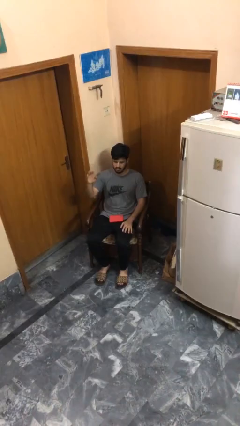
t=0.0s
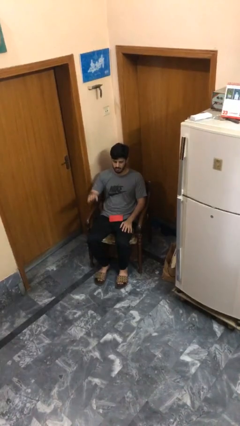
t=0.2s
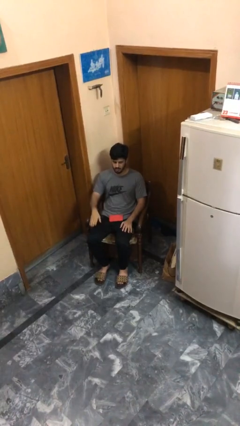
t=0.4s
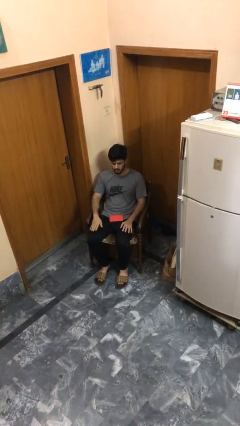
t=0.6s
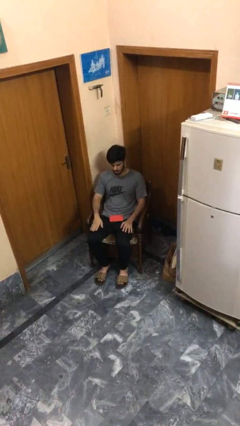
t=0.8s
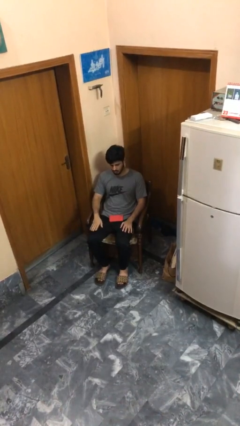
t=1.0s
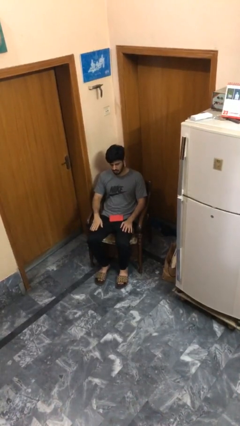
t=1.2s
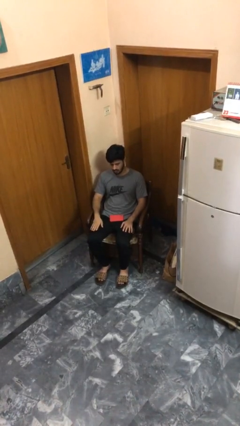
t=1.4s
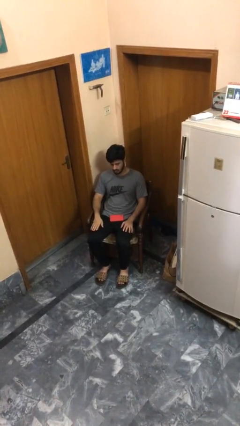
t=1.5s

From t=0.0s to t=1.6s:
person gestures lower hand

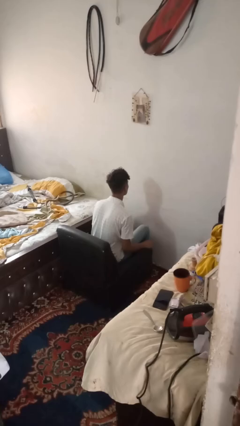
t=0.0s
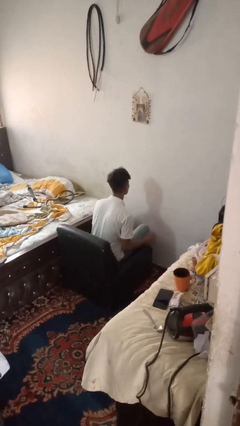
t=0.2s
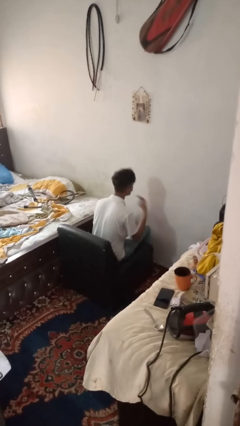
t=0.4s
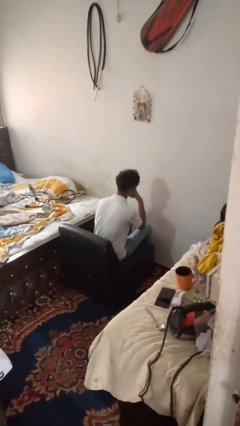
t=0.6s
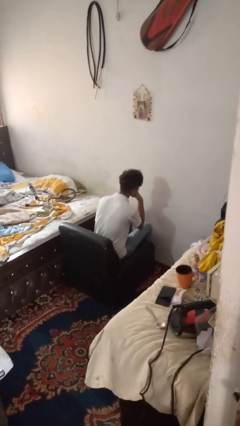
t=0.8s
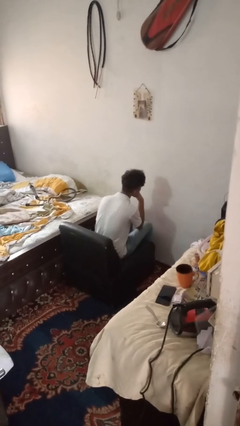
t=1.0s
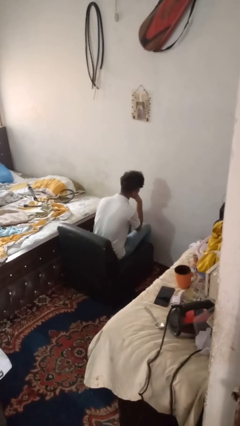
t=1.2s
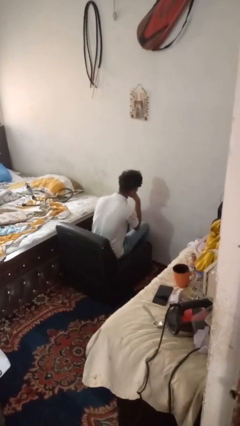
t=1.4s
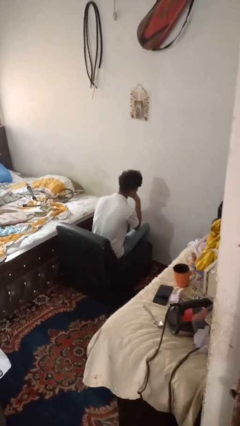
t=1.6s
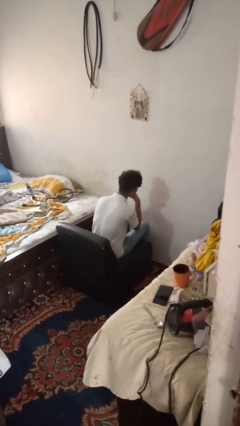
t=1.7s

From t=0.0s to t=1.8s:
person strokes chin

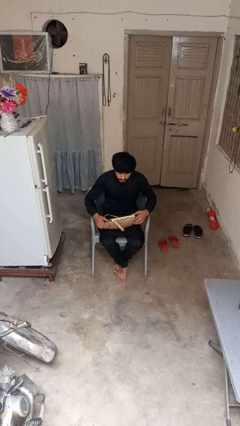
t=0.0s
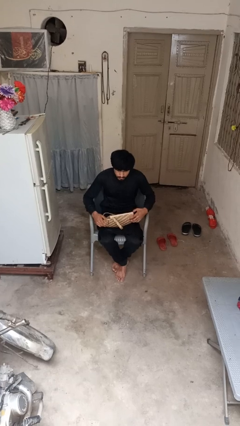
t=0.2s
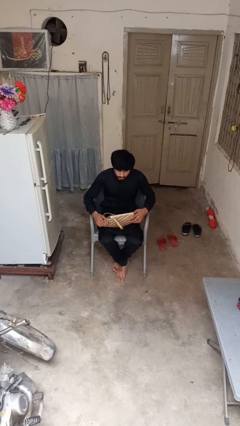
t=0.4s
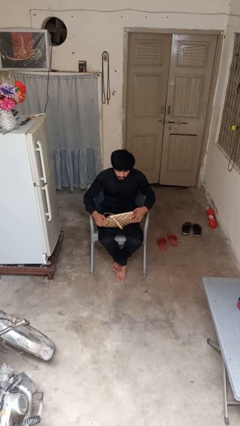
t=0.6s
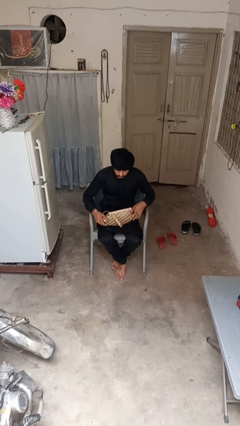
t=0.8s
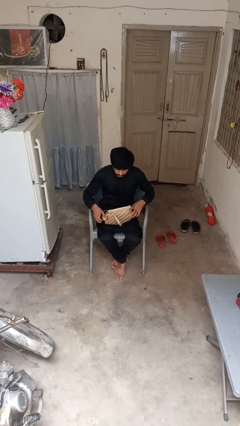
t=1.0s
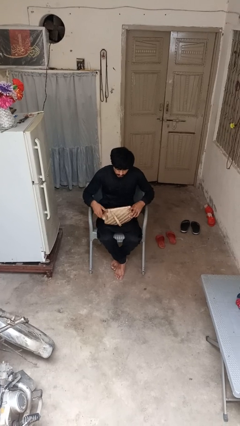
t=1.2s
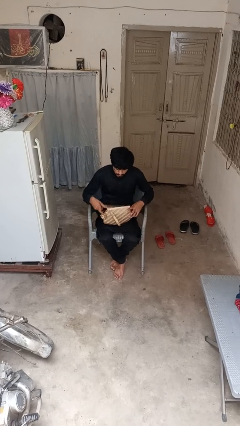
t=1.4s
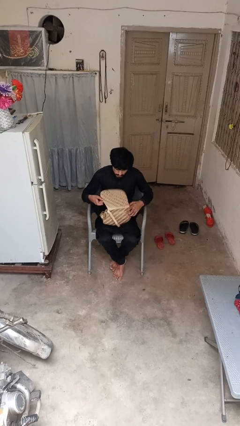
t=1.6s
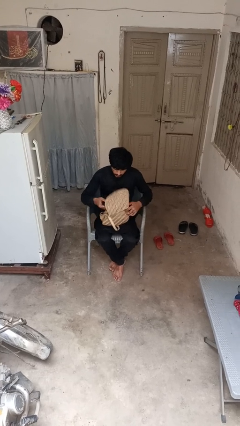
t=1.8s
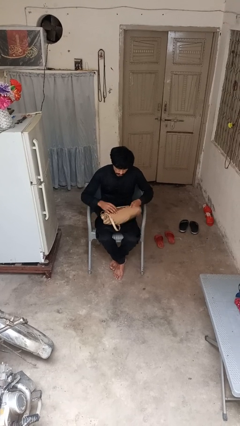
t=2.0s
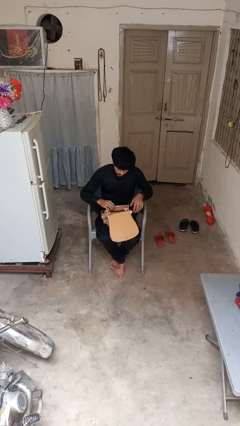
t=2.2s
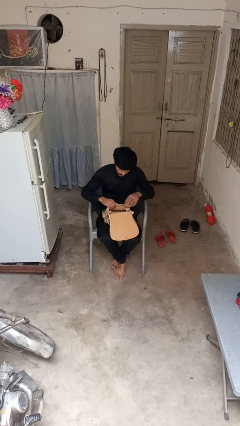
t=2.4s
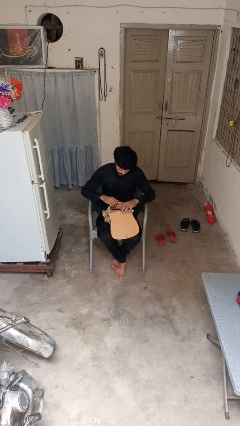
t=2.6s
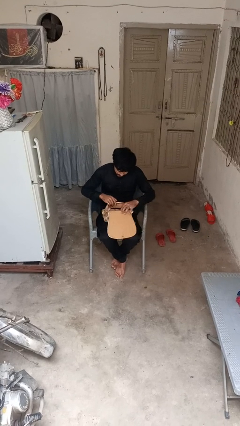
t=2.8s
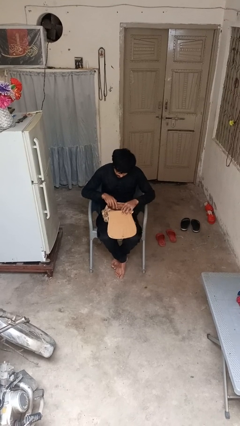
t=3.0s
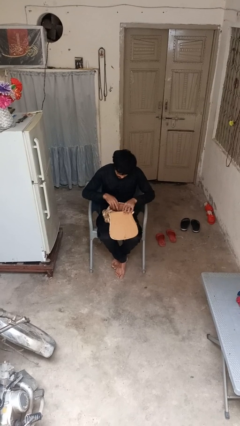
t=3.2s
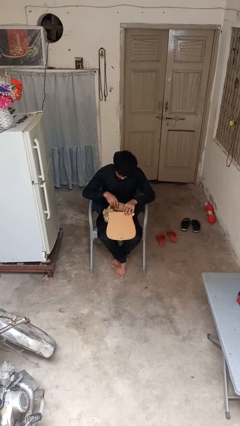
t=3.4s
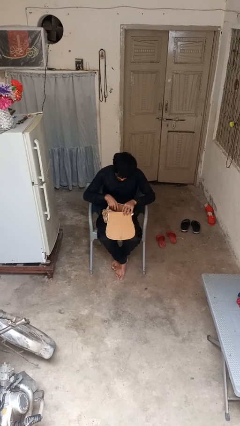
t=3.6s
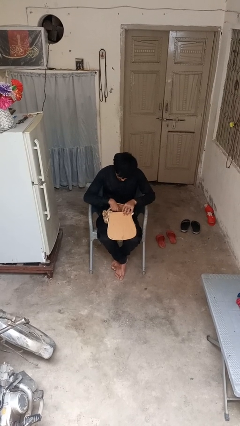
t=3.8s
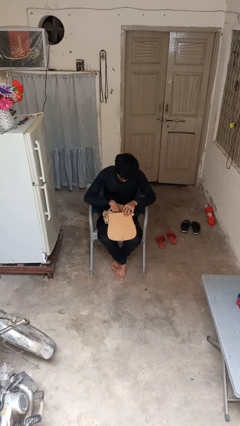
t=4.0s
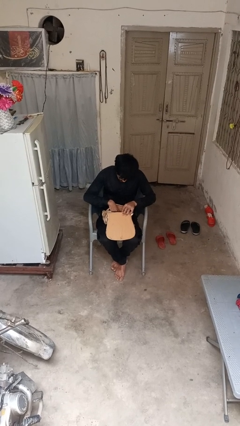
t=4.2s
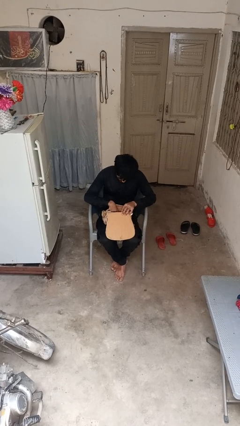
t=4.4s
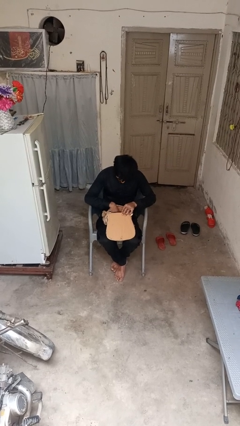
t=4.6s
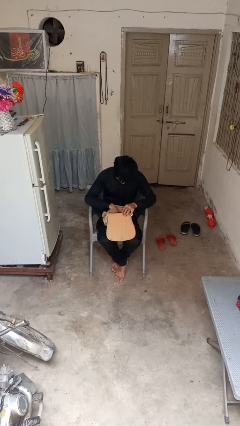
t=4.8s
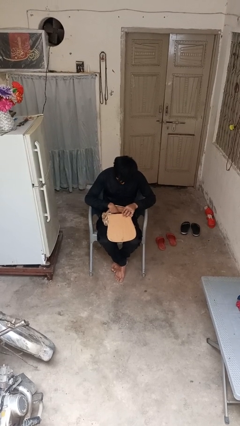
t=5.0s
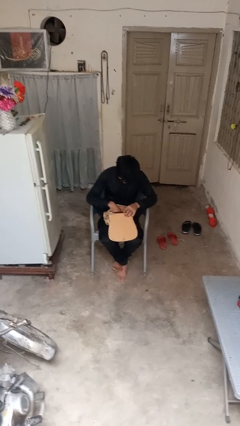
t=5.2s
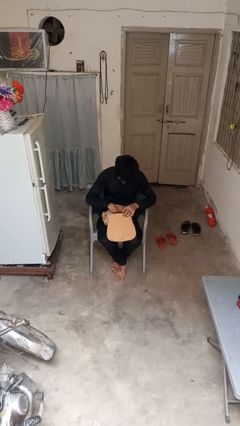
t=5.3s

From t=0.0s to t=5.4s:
person searches in purse

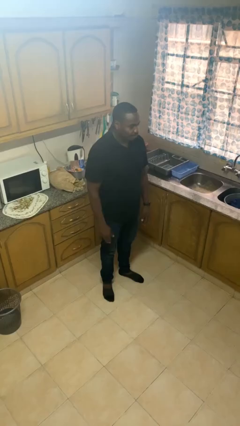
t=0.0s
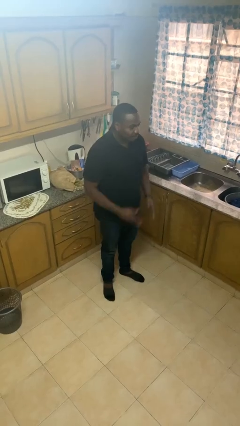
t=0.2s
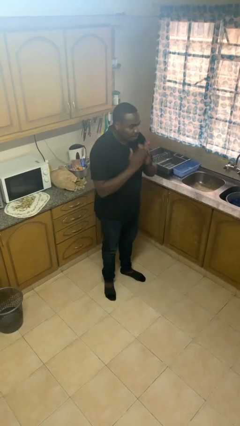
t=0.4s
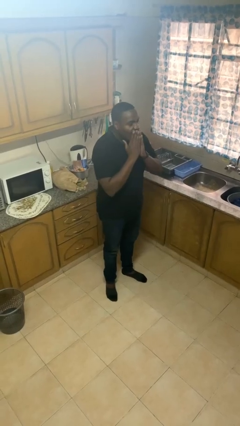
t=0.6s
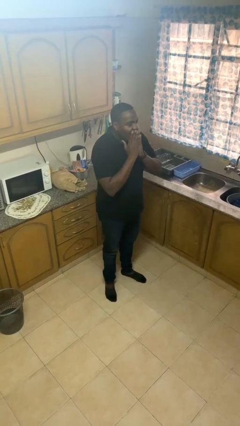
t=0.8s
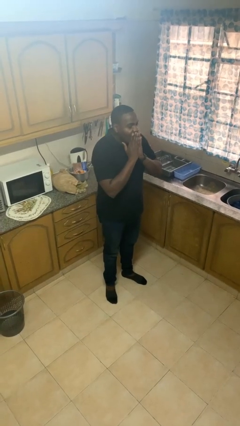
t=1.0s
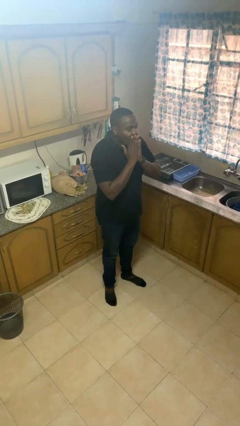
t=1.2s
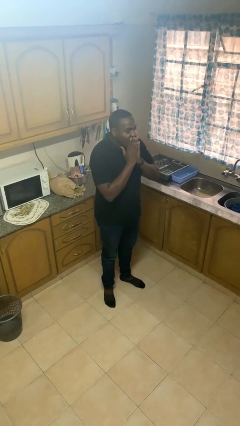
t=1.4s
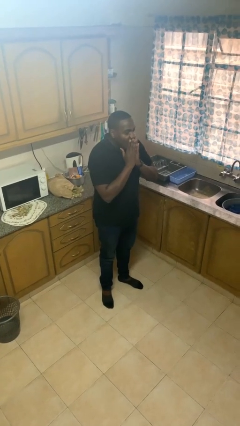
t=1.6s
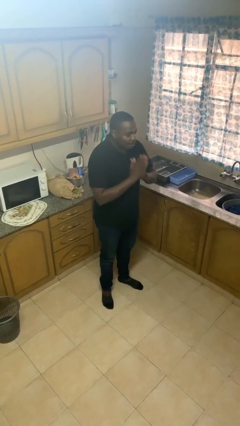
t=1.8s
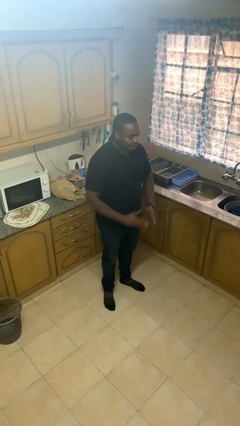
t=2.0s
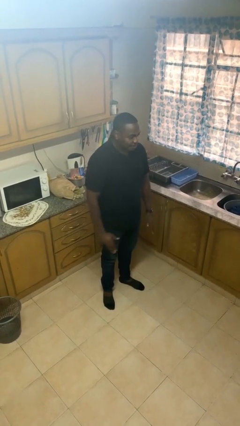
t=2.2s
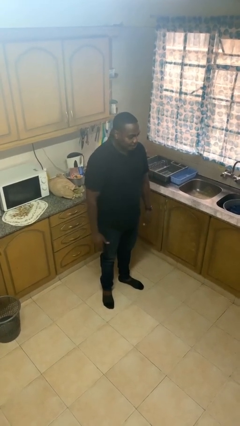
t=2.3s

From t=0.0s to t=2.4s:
person yawns

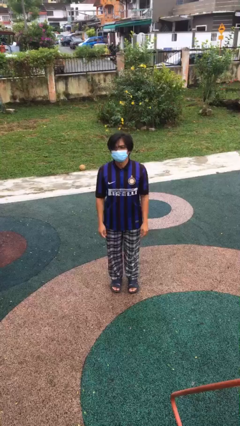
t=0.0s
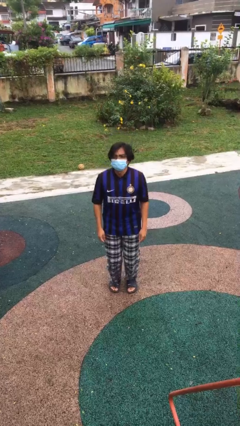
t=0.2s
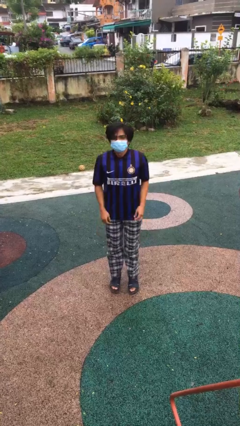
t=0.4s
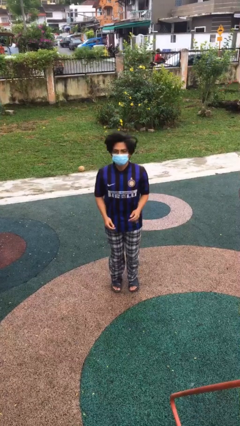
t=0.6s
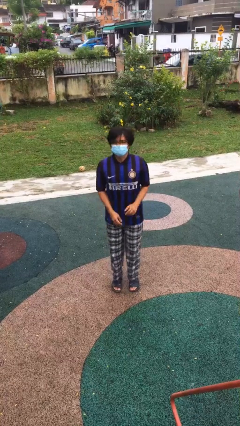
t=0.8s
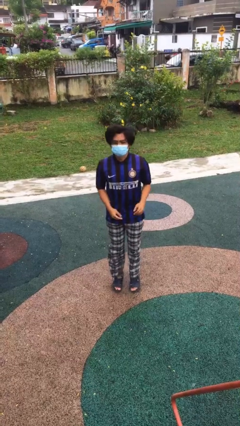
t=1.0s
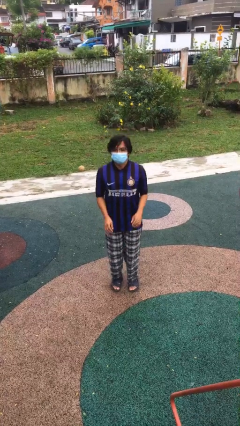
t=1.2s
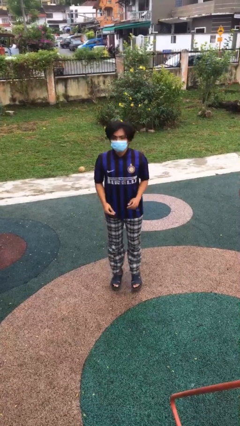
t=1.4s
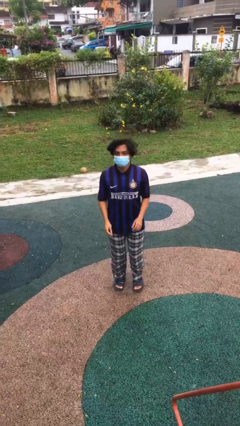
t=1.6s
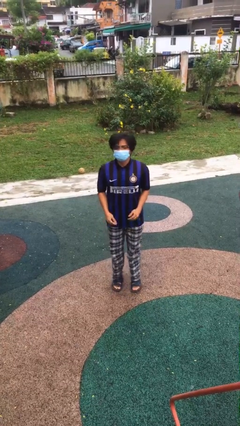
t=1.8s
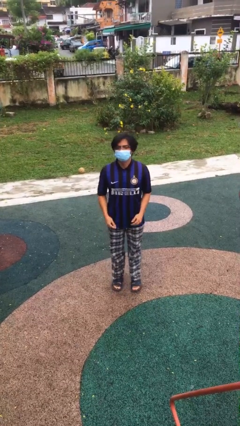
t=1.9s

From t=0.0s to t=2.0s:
person jumps

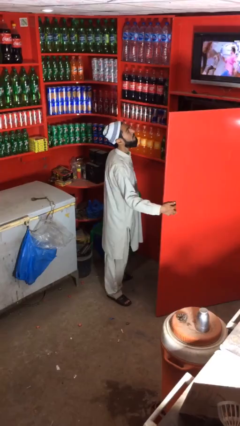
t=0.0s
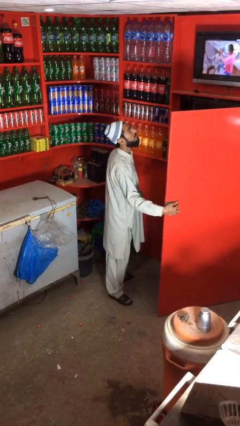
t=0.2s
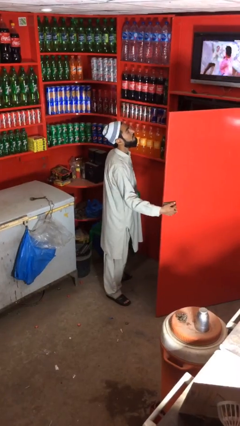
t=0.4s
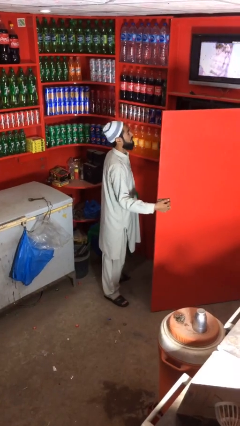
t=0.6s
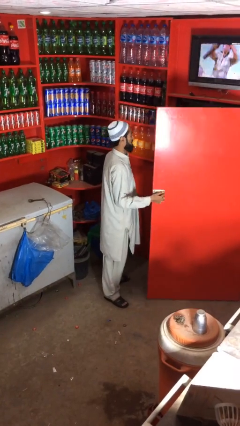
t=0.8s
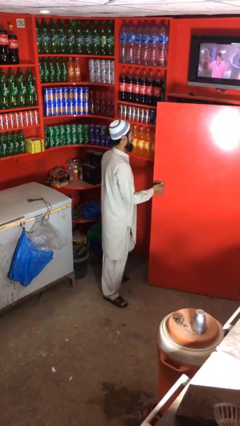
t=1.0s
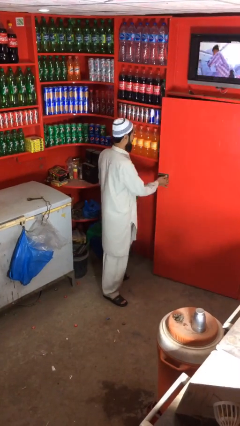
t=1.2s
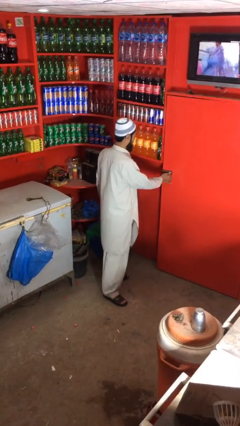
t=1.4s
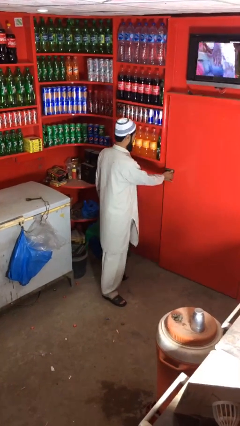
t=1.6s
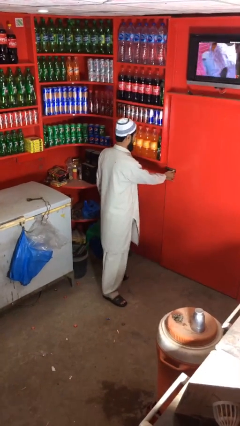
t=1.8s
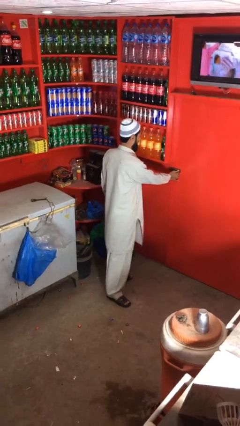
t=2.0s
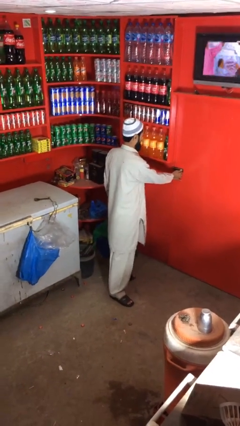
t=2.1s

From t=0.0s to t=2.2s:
person closes facility door

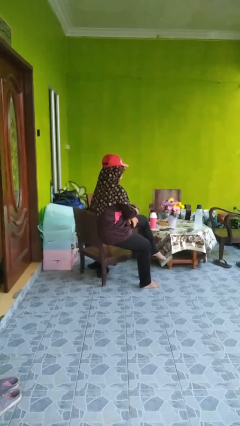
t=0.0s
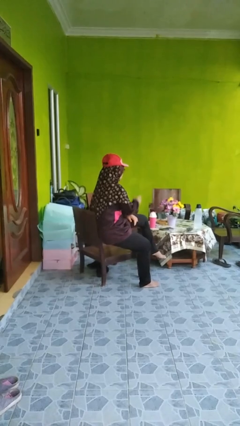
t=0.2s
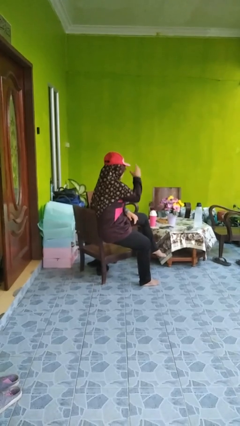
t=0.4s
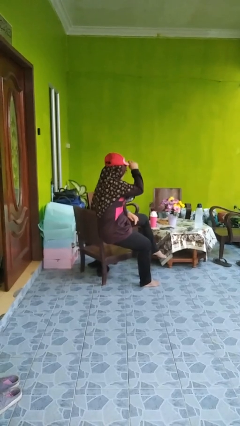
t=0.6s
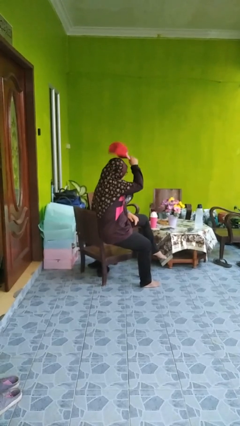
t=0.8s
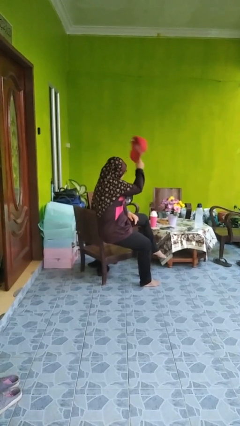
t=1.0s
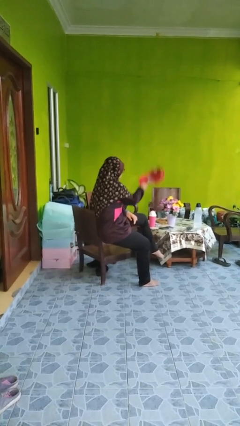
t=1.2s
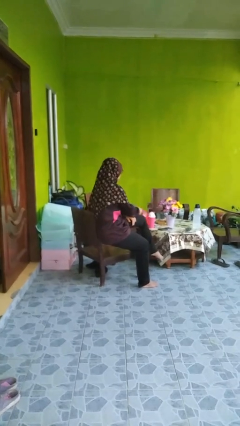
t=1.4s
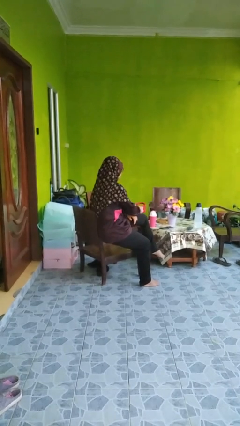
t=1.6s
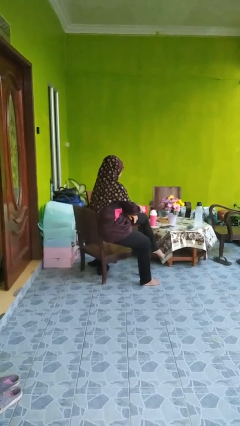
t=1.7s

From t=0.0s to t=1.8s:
person takes off hat
